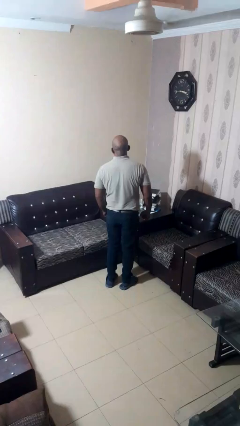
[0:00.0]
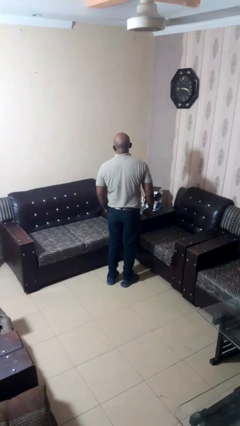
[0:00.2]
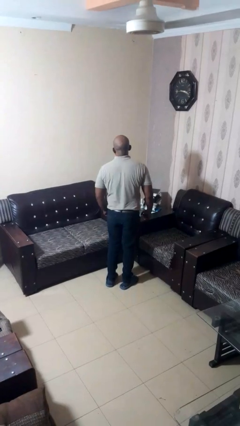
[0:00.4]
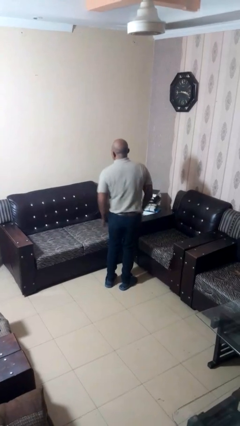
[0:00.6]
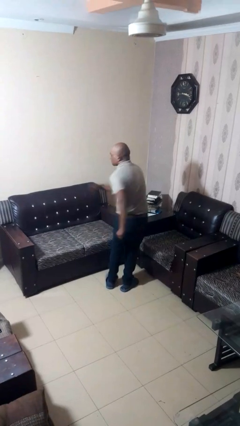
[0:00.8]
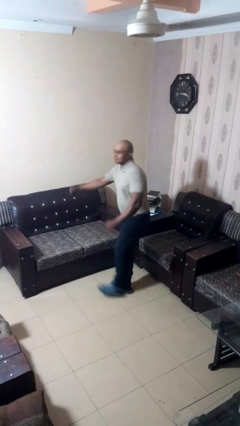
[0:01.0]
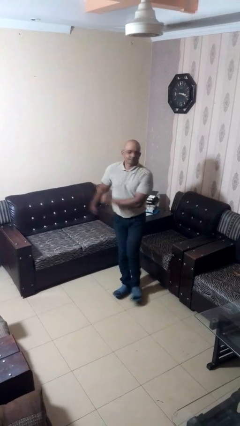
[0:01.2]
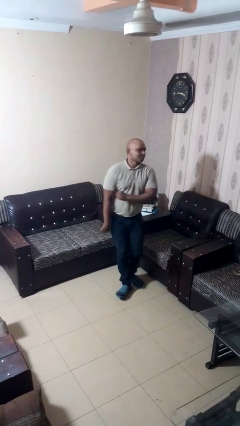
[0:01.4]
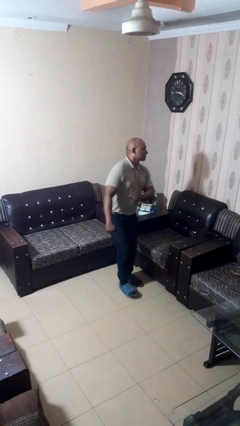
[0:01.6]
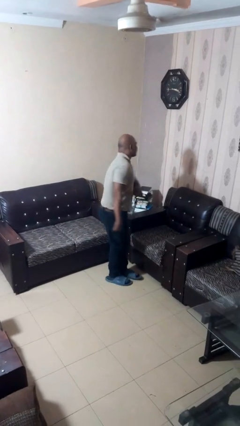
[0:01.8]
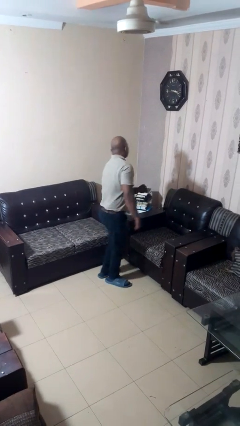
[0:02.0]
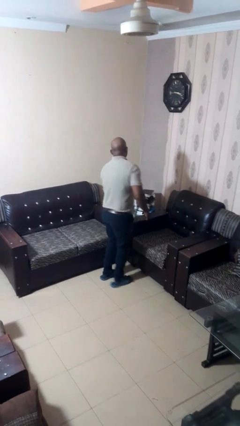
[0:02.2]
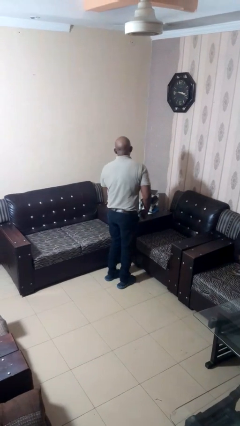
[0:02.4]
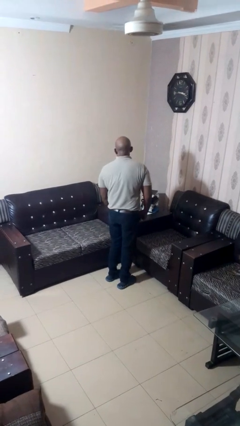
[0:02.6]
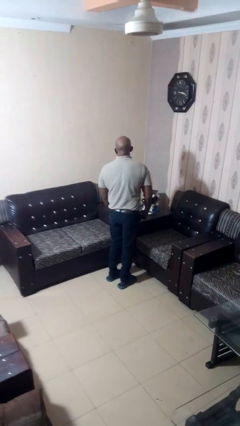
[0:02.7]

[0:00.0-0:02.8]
person twirls

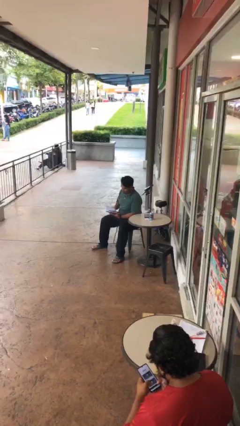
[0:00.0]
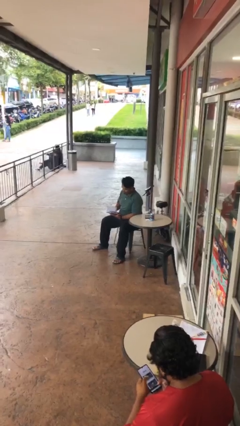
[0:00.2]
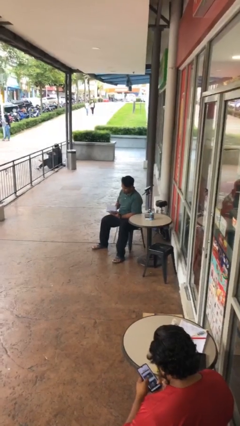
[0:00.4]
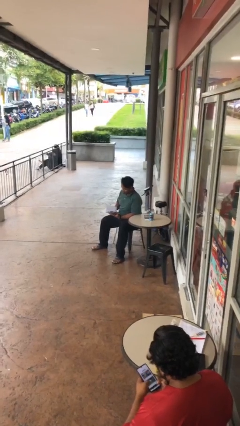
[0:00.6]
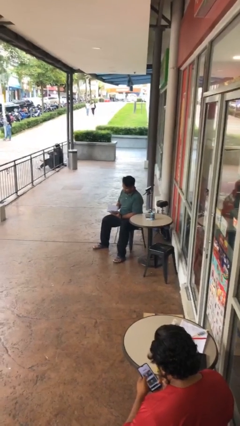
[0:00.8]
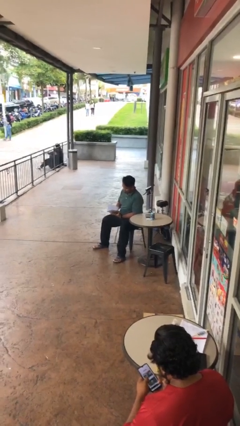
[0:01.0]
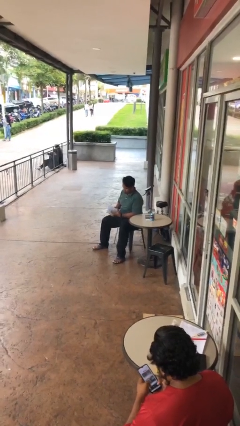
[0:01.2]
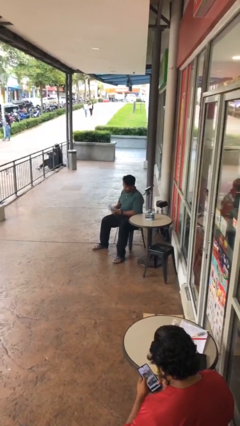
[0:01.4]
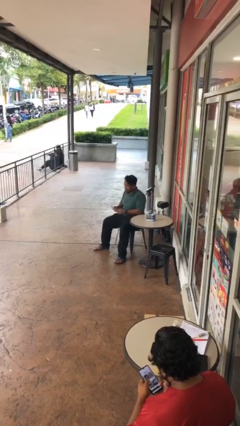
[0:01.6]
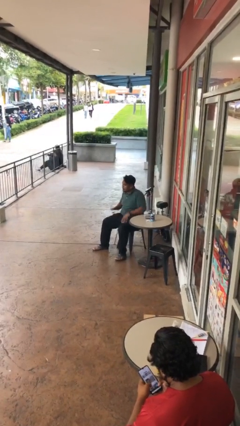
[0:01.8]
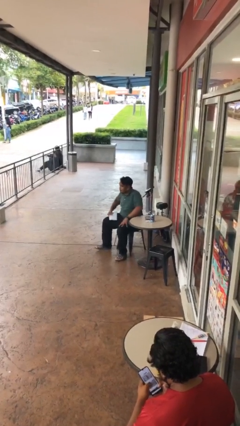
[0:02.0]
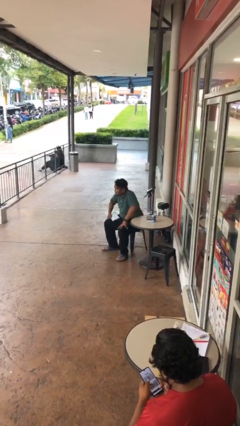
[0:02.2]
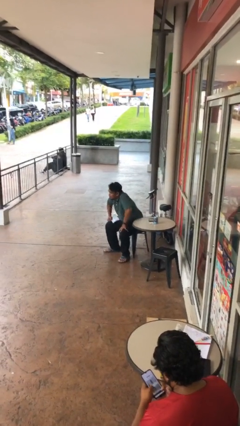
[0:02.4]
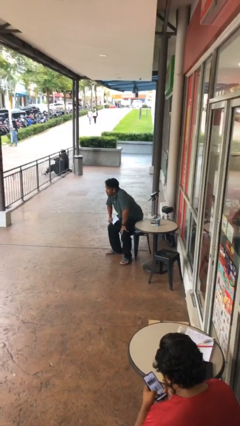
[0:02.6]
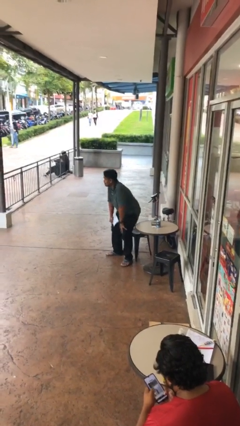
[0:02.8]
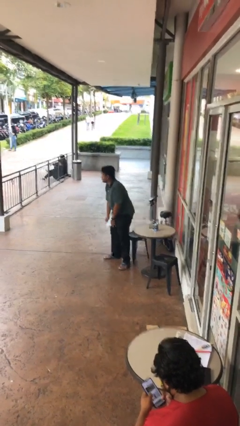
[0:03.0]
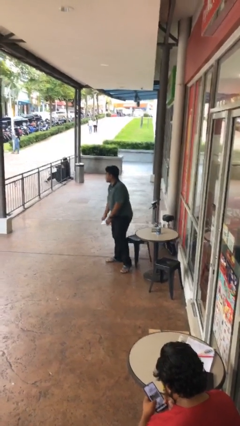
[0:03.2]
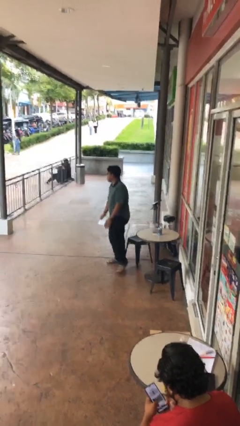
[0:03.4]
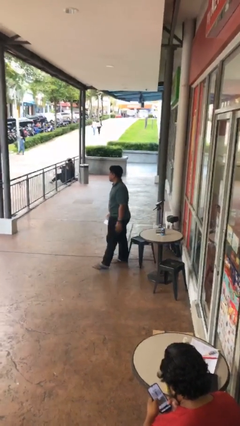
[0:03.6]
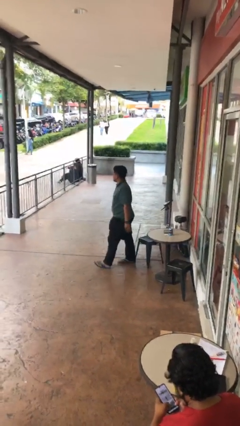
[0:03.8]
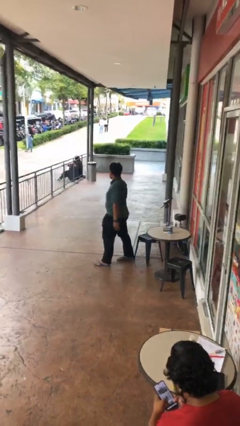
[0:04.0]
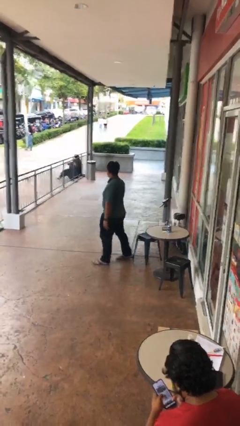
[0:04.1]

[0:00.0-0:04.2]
person stands up

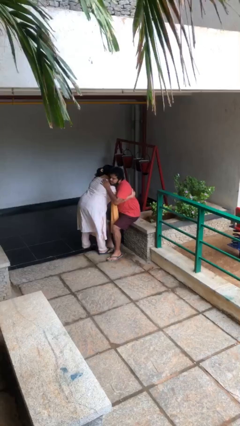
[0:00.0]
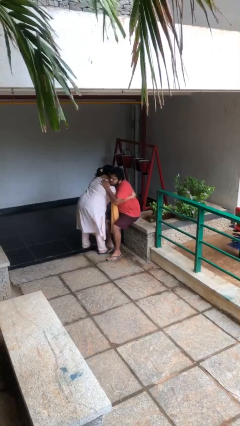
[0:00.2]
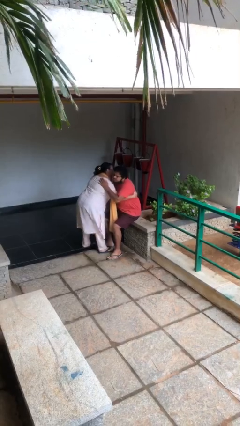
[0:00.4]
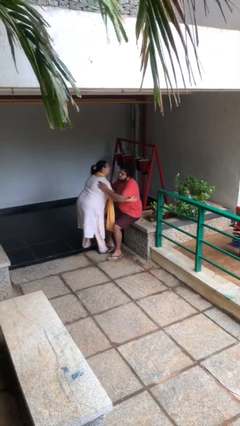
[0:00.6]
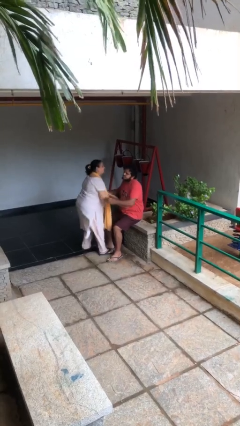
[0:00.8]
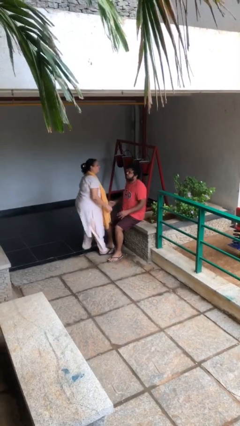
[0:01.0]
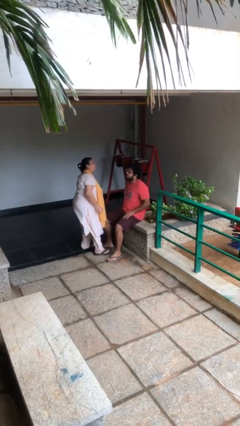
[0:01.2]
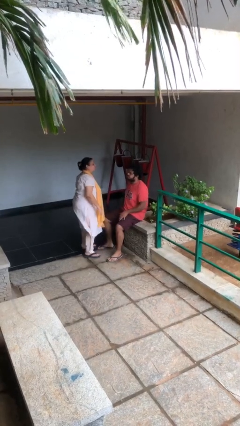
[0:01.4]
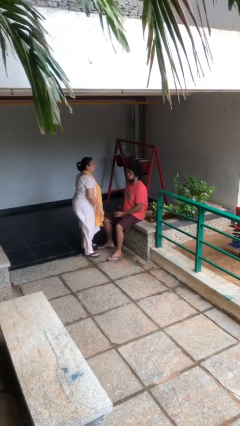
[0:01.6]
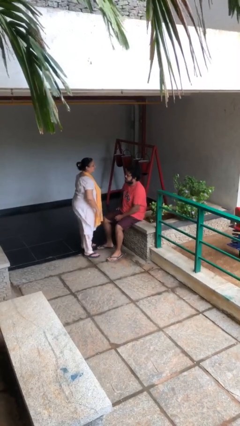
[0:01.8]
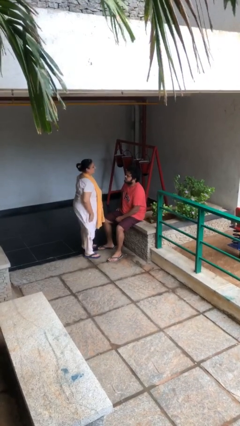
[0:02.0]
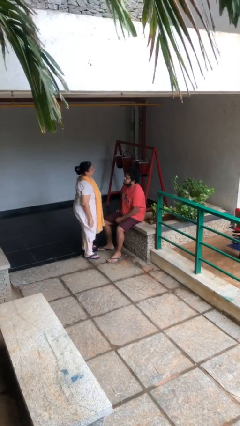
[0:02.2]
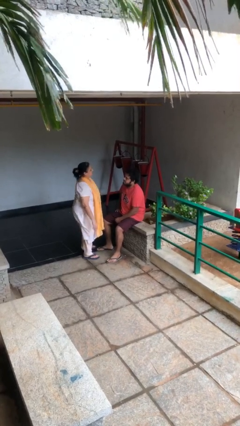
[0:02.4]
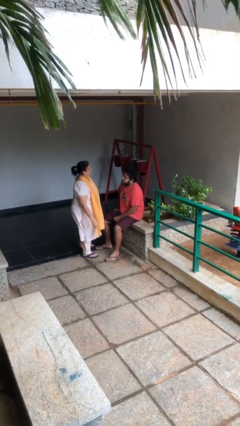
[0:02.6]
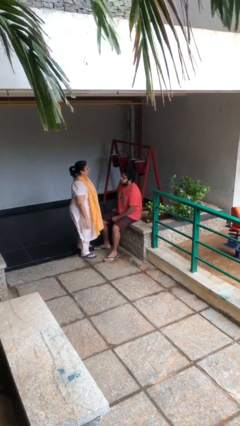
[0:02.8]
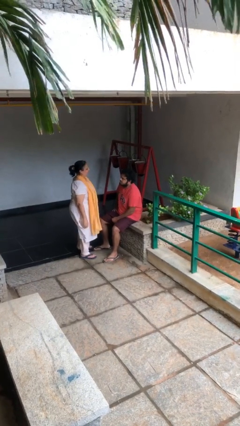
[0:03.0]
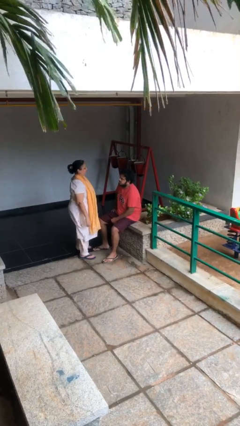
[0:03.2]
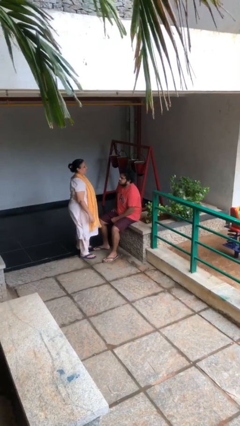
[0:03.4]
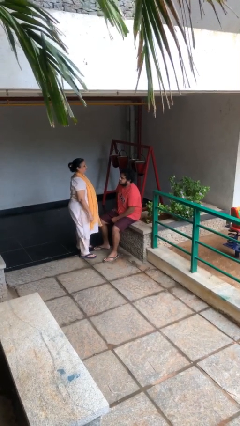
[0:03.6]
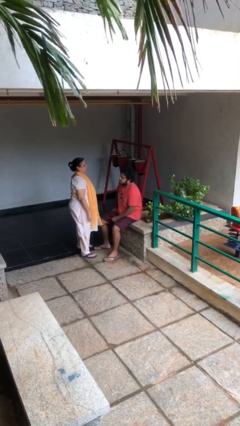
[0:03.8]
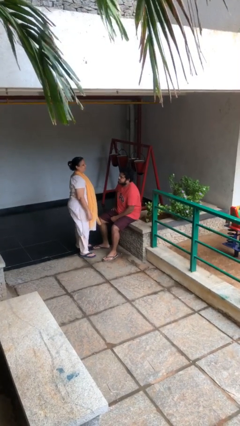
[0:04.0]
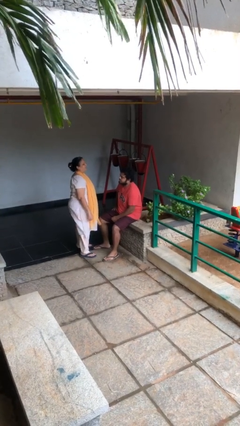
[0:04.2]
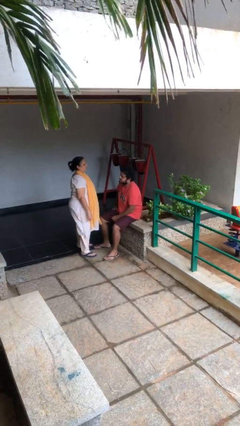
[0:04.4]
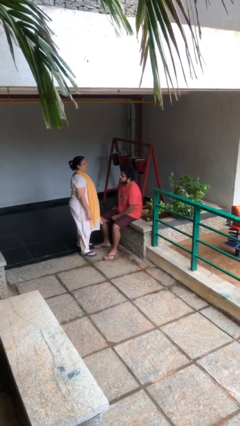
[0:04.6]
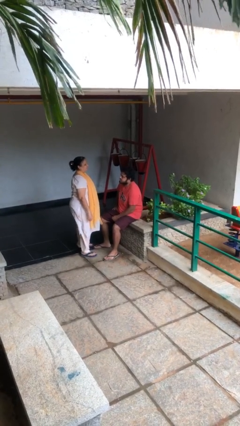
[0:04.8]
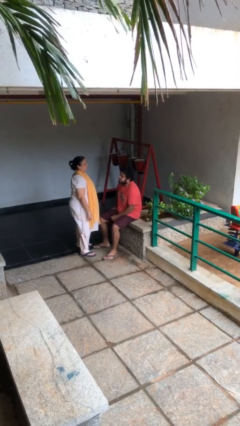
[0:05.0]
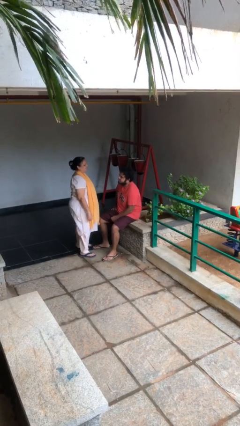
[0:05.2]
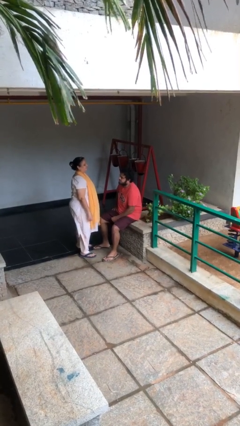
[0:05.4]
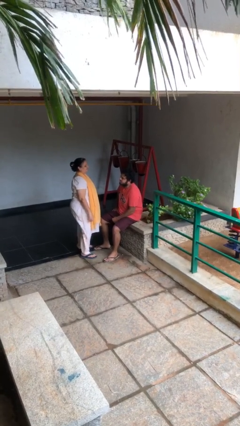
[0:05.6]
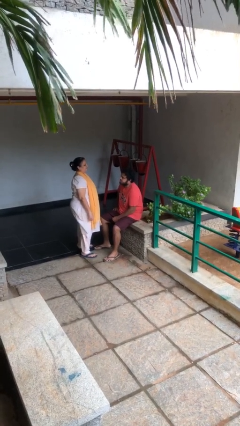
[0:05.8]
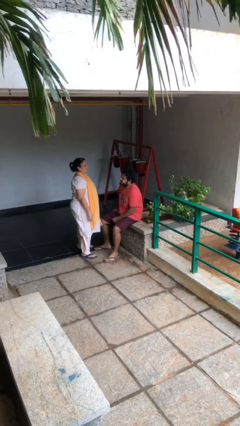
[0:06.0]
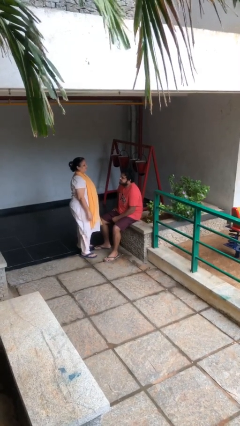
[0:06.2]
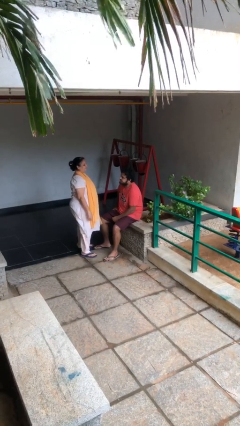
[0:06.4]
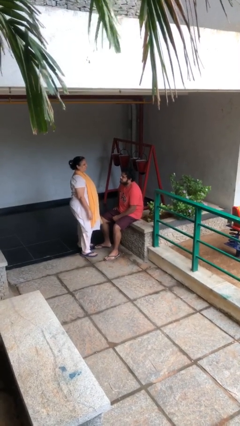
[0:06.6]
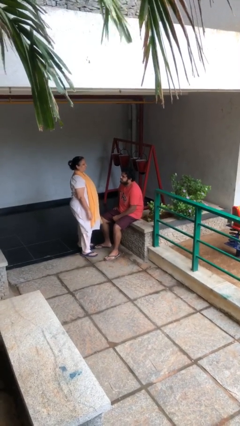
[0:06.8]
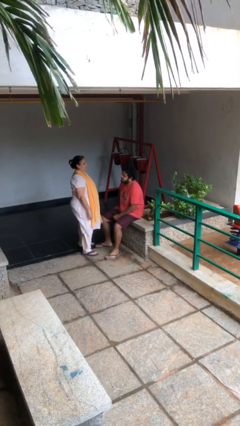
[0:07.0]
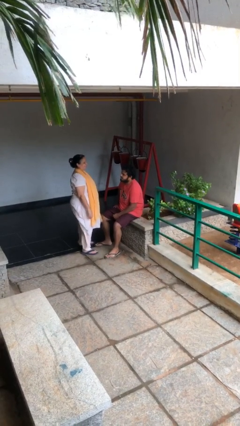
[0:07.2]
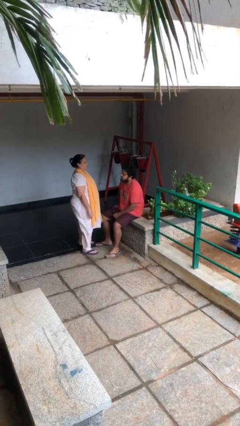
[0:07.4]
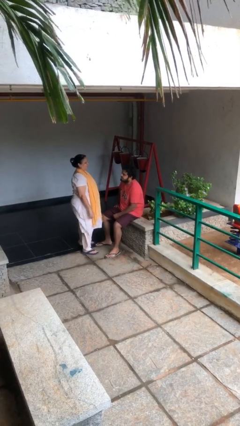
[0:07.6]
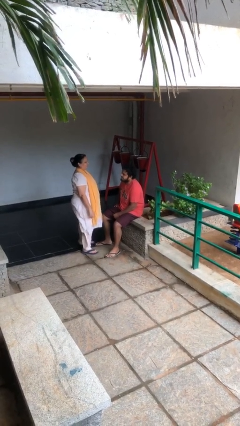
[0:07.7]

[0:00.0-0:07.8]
person embraces person

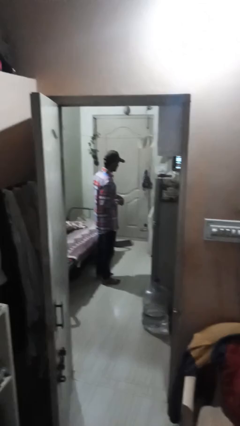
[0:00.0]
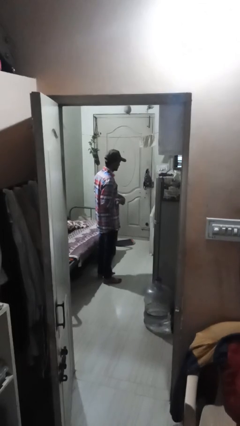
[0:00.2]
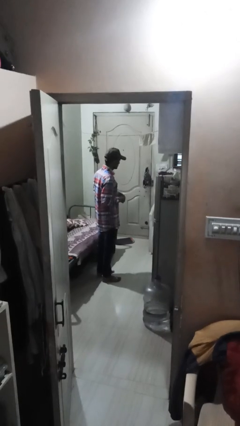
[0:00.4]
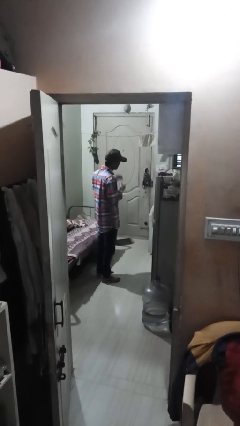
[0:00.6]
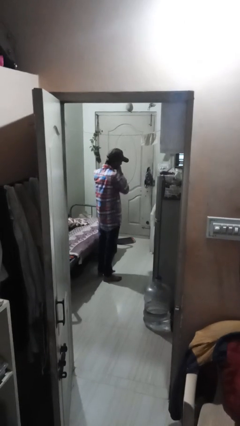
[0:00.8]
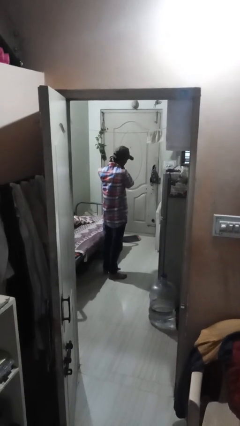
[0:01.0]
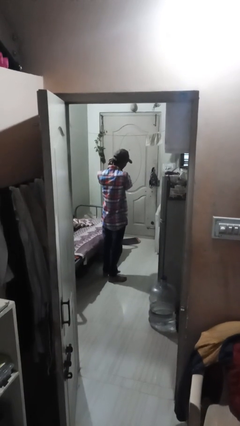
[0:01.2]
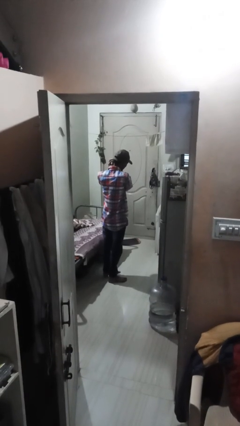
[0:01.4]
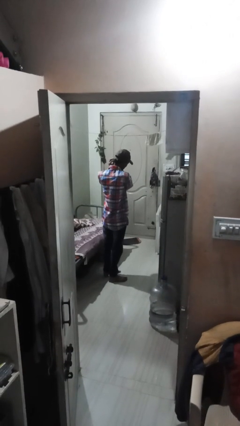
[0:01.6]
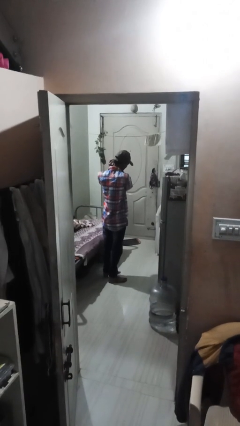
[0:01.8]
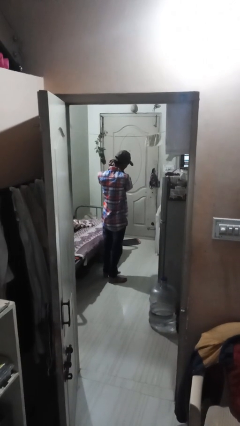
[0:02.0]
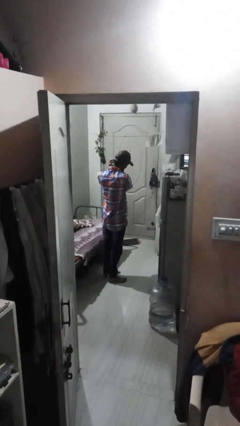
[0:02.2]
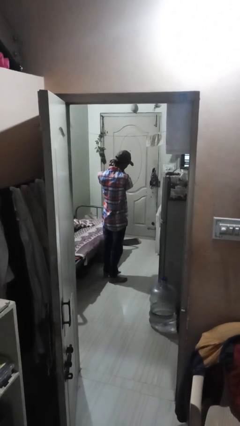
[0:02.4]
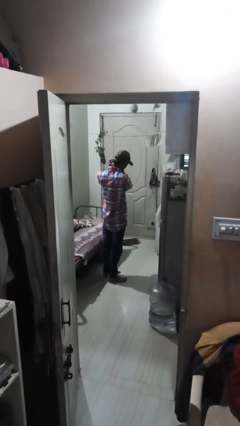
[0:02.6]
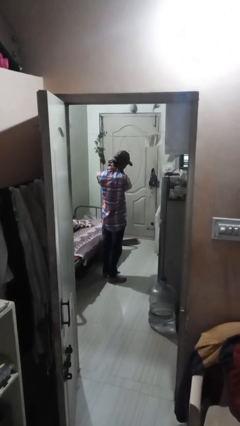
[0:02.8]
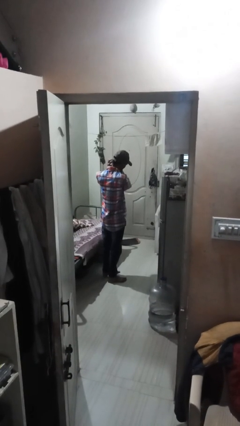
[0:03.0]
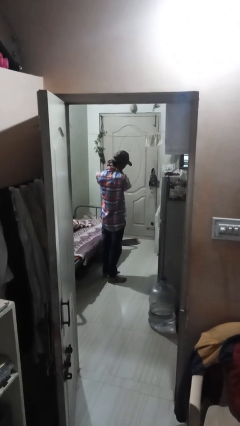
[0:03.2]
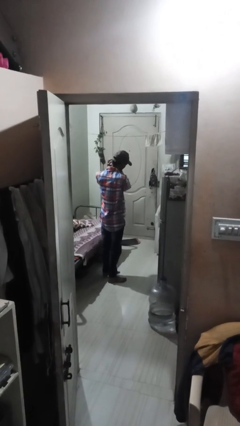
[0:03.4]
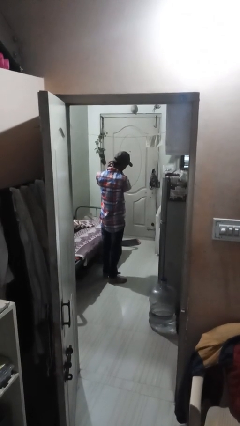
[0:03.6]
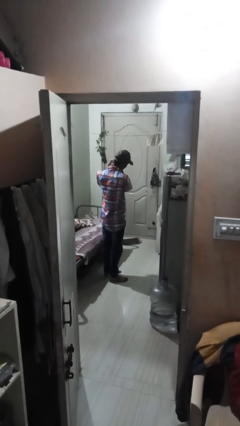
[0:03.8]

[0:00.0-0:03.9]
person puts on earrings
